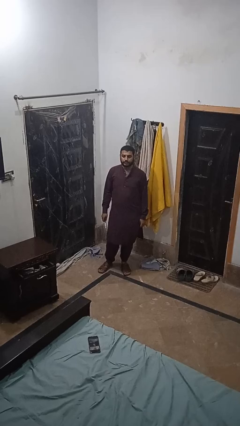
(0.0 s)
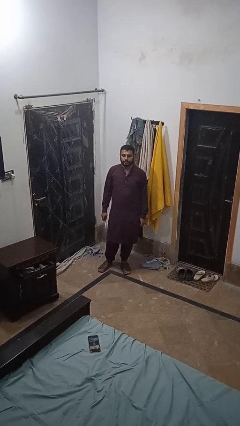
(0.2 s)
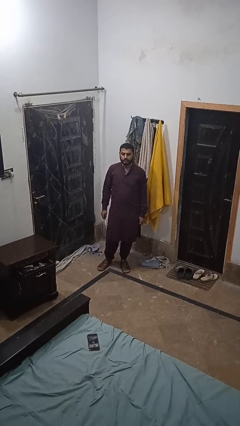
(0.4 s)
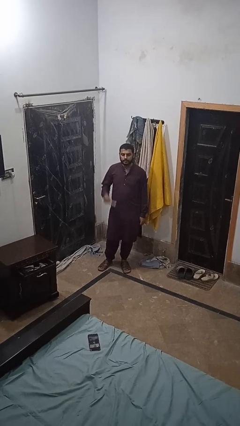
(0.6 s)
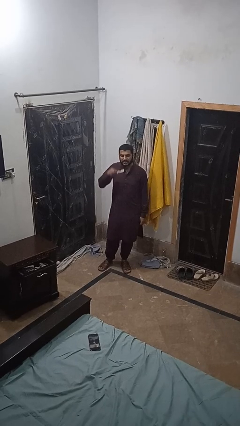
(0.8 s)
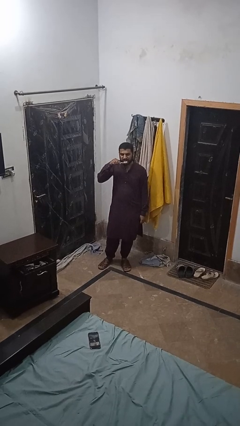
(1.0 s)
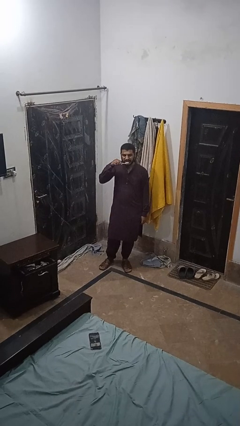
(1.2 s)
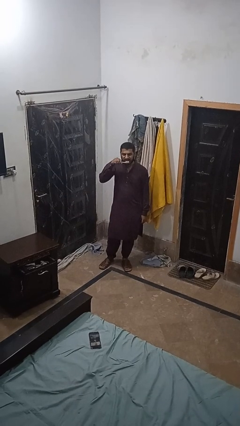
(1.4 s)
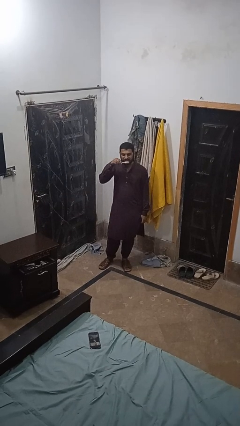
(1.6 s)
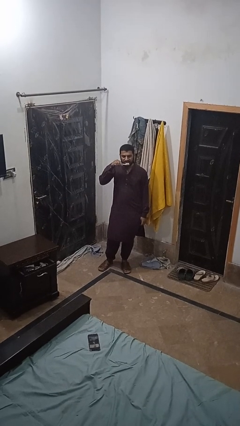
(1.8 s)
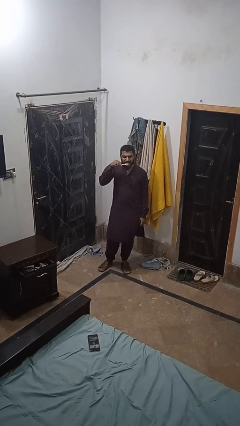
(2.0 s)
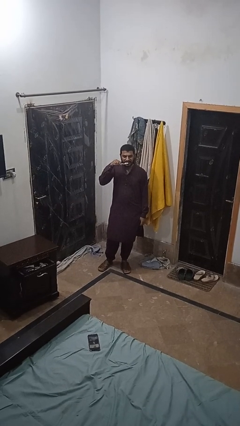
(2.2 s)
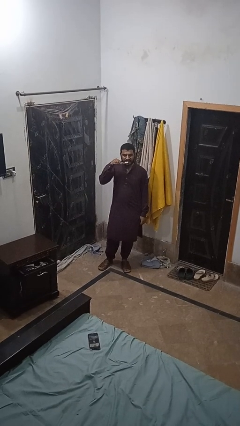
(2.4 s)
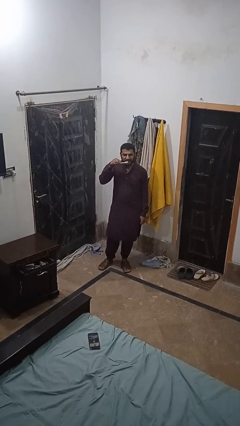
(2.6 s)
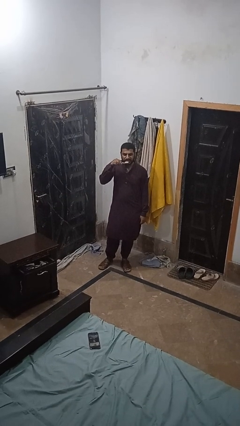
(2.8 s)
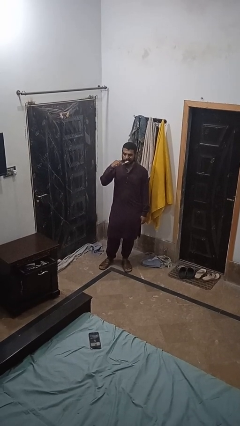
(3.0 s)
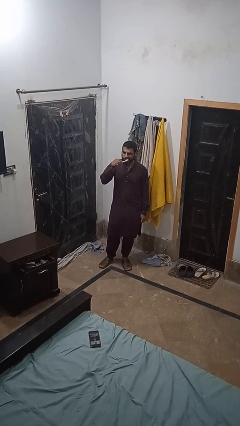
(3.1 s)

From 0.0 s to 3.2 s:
person brushes teeth

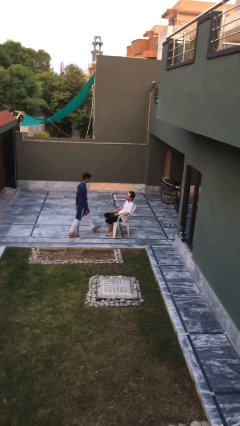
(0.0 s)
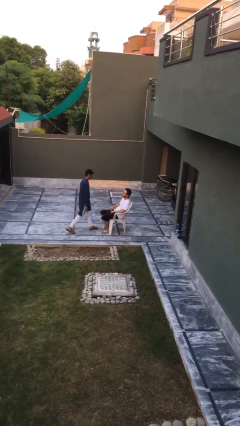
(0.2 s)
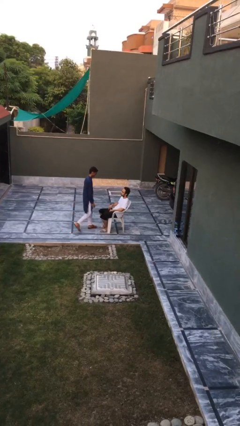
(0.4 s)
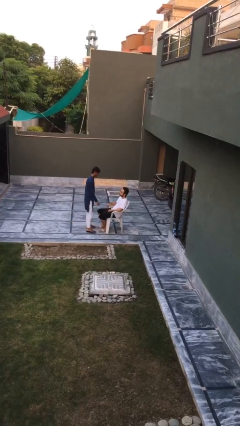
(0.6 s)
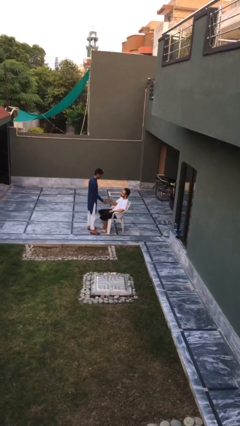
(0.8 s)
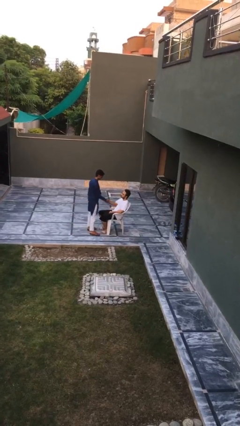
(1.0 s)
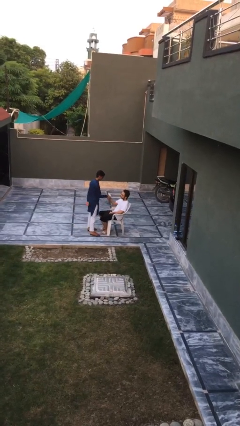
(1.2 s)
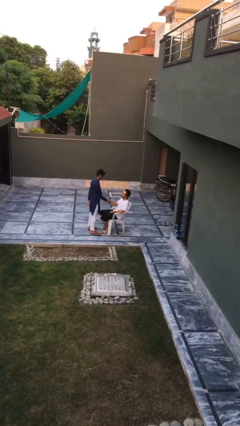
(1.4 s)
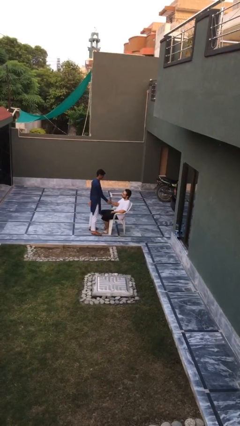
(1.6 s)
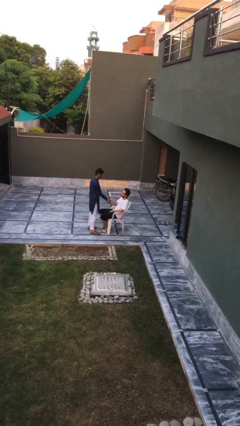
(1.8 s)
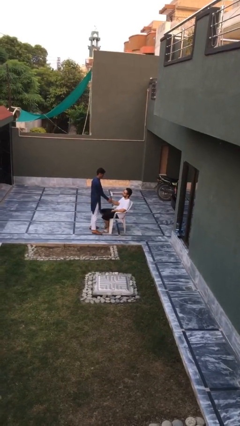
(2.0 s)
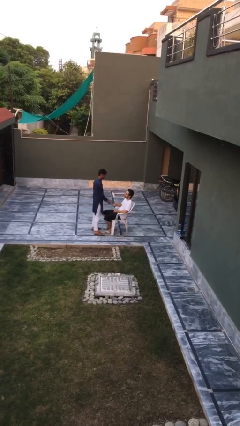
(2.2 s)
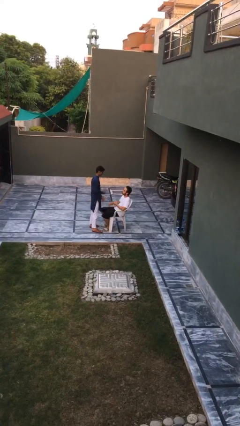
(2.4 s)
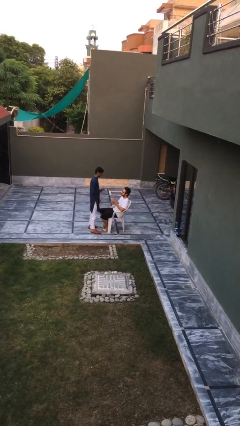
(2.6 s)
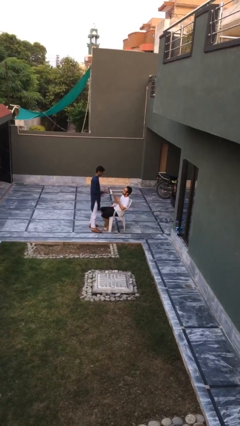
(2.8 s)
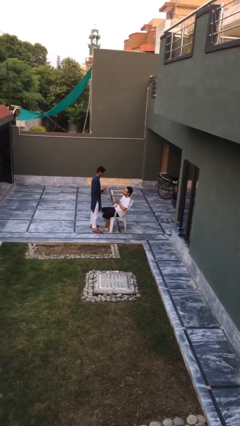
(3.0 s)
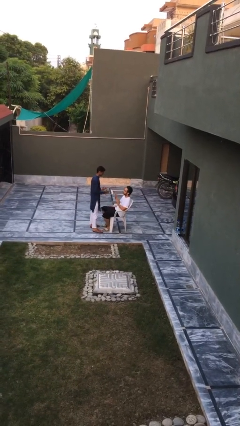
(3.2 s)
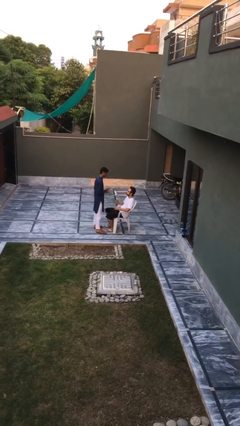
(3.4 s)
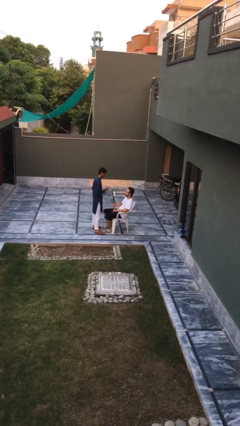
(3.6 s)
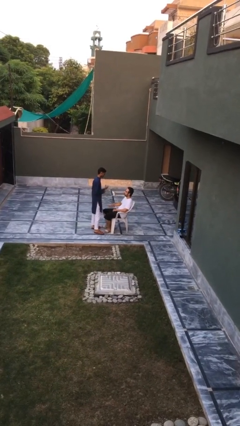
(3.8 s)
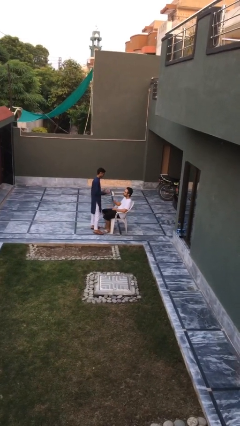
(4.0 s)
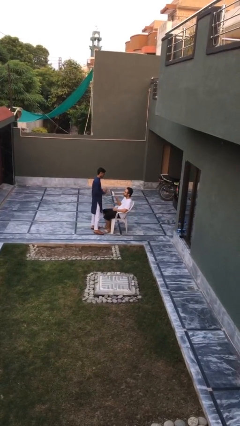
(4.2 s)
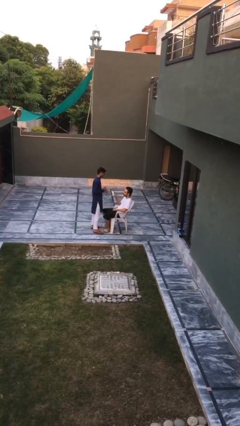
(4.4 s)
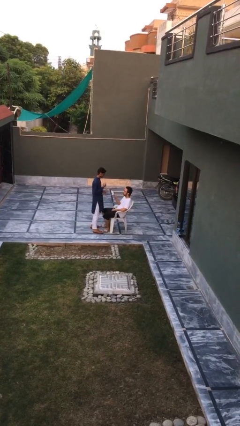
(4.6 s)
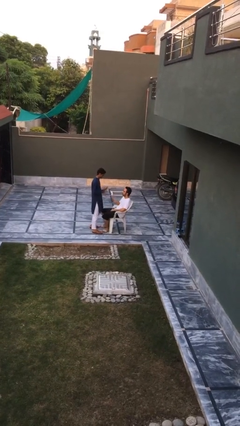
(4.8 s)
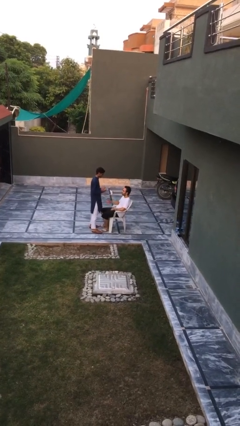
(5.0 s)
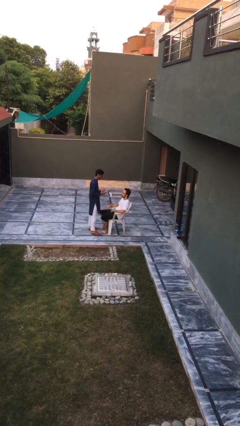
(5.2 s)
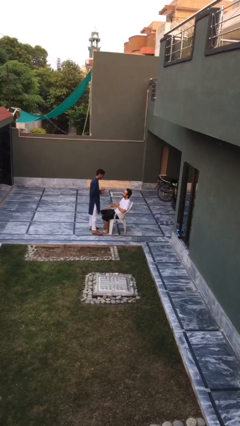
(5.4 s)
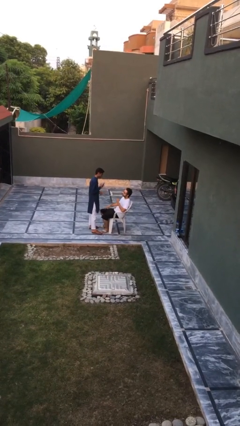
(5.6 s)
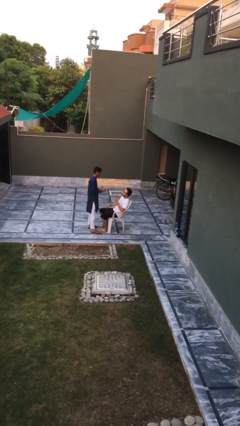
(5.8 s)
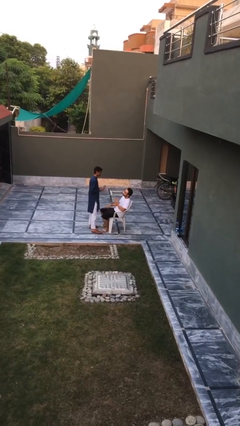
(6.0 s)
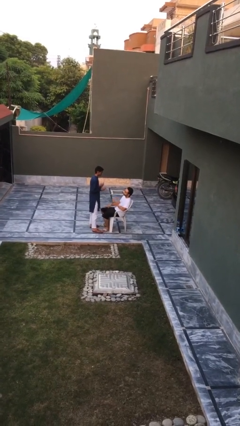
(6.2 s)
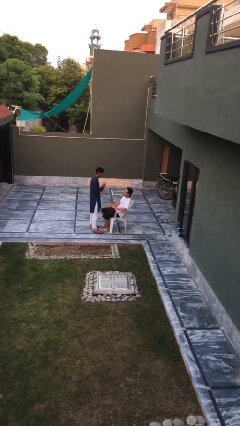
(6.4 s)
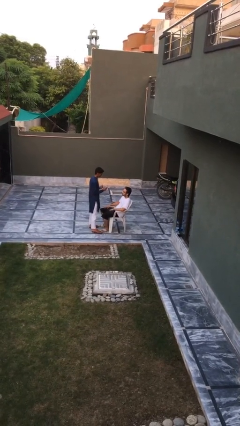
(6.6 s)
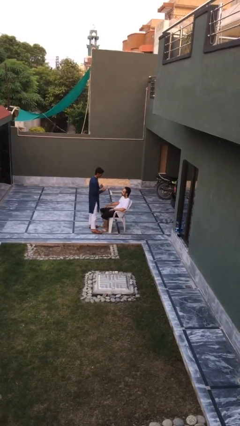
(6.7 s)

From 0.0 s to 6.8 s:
person shakes hand

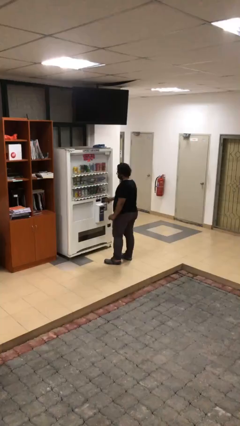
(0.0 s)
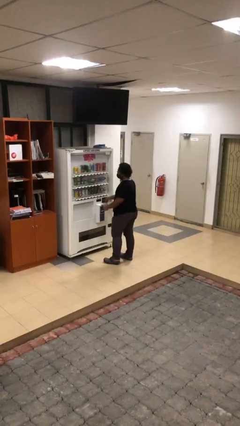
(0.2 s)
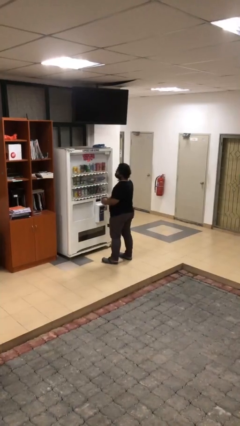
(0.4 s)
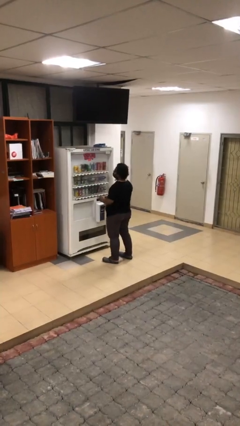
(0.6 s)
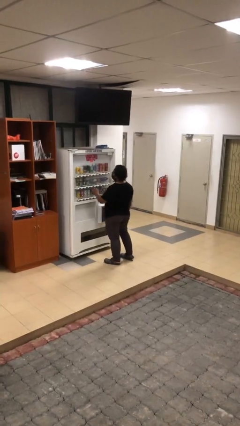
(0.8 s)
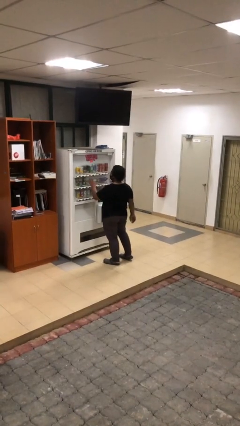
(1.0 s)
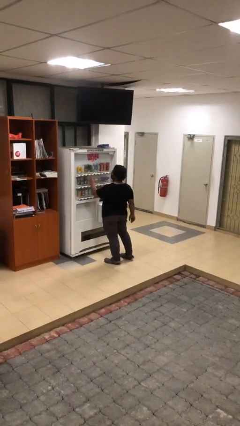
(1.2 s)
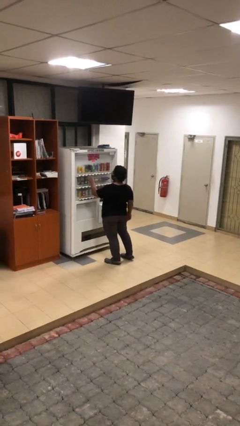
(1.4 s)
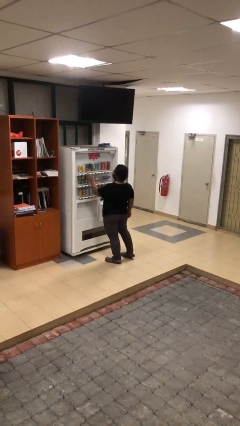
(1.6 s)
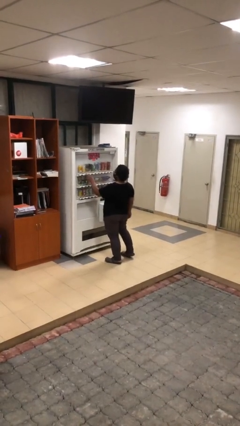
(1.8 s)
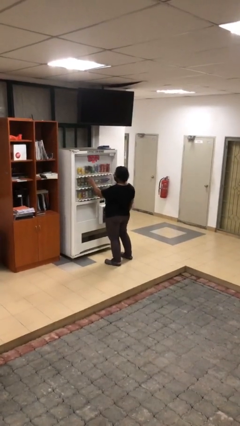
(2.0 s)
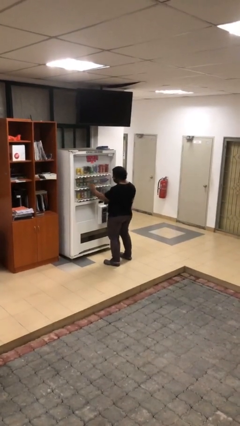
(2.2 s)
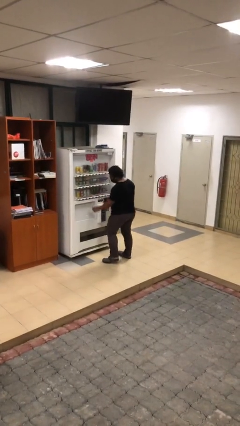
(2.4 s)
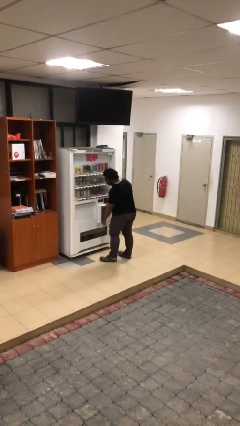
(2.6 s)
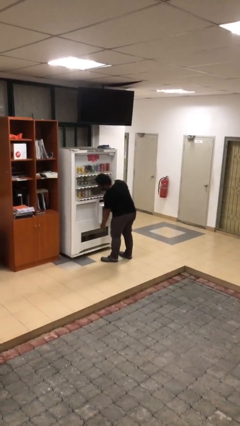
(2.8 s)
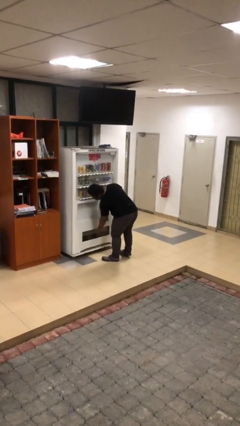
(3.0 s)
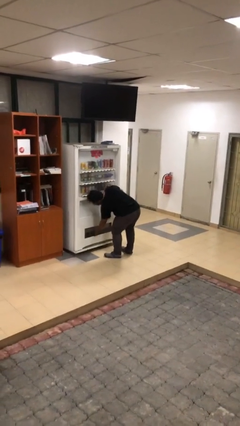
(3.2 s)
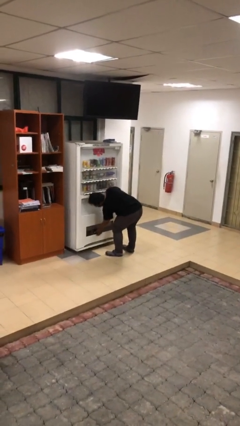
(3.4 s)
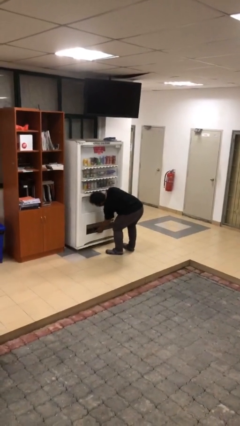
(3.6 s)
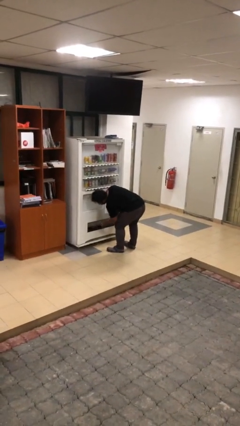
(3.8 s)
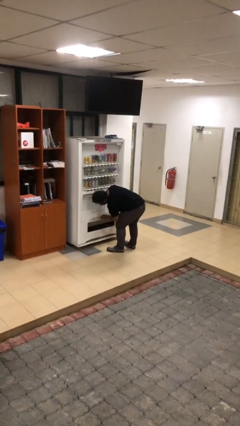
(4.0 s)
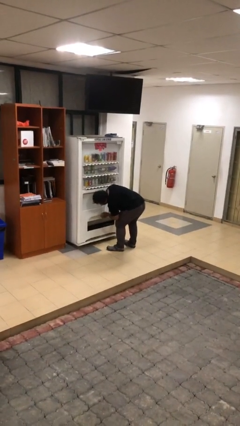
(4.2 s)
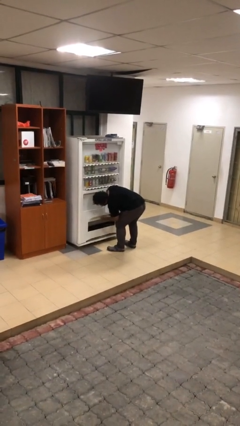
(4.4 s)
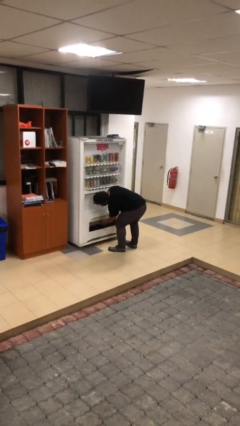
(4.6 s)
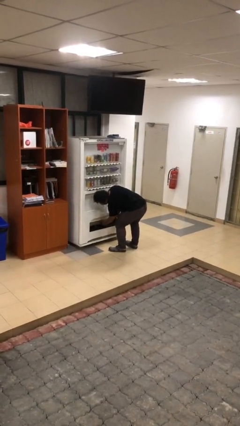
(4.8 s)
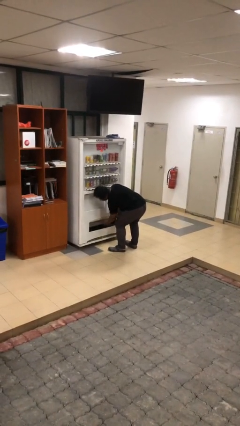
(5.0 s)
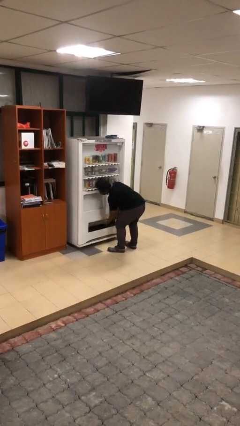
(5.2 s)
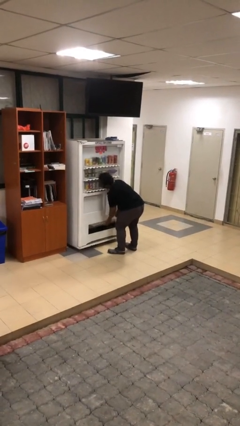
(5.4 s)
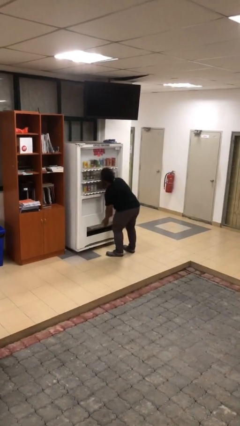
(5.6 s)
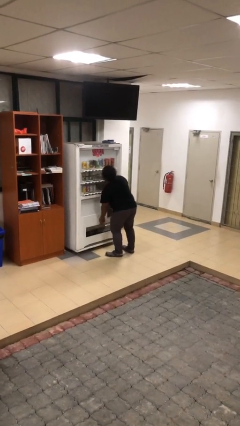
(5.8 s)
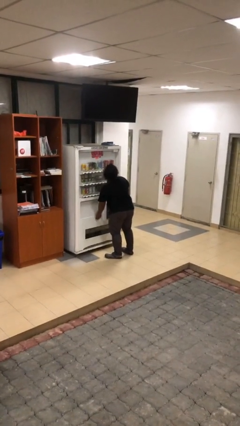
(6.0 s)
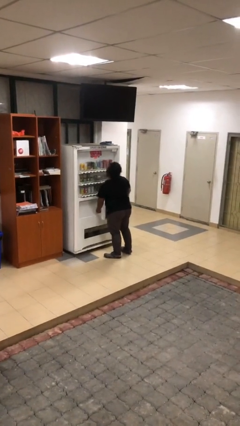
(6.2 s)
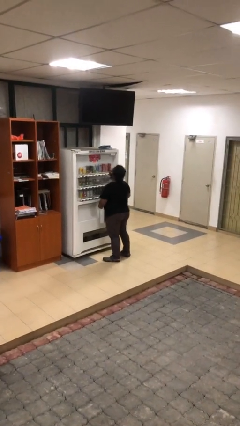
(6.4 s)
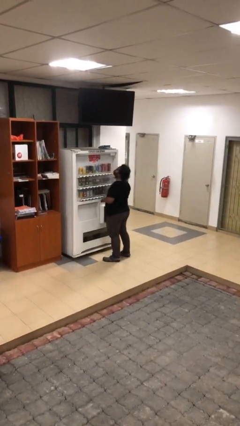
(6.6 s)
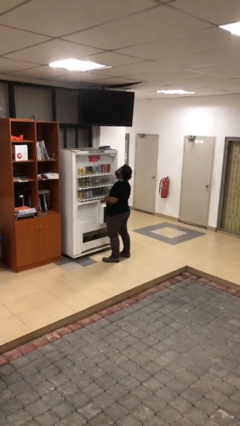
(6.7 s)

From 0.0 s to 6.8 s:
person purchases from machine

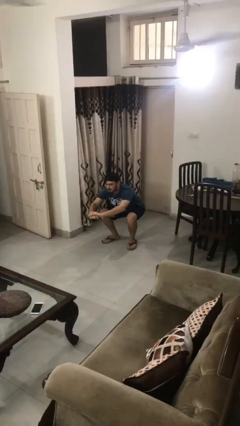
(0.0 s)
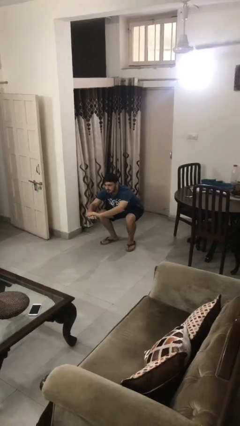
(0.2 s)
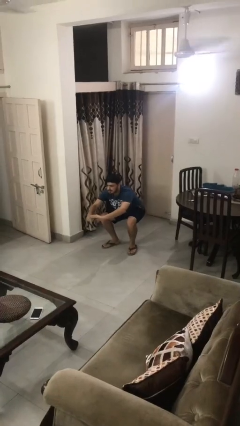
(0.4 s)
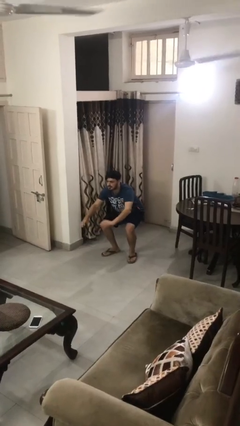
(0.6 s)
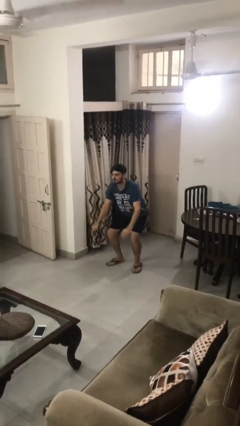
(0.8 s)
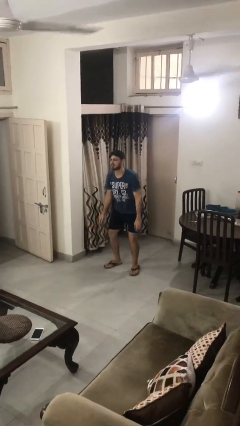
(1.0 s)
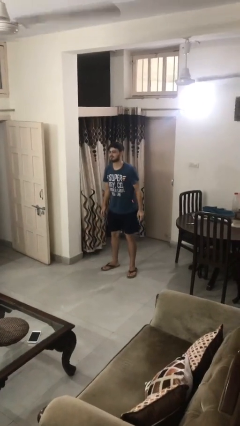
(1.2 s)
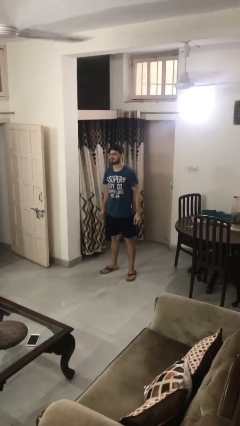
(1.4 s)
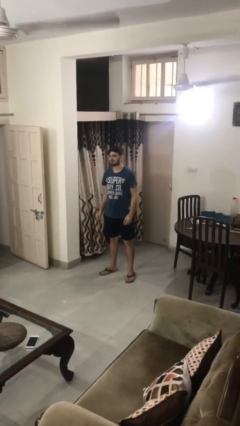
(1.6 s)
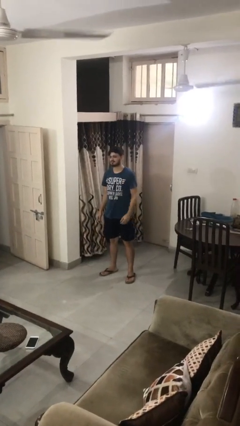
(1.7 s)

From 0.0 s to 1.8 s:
person stands up
